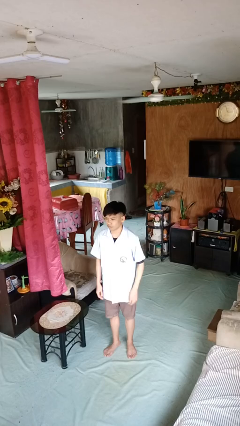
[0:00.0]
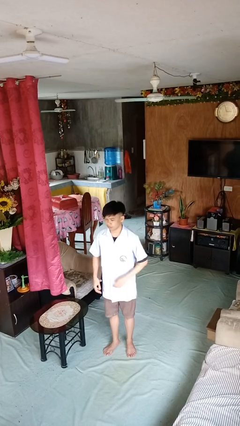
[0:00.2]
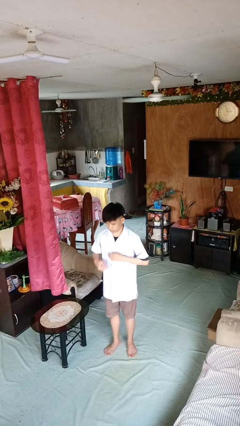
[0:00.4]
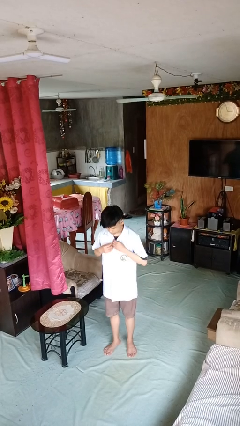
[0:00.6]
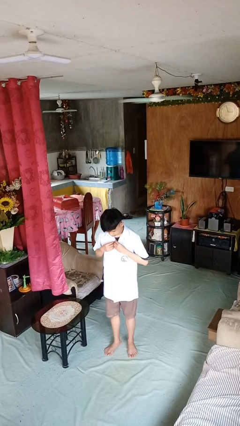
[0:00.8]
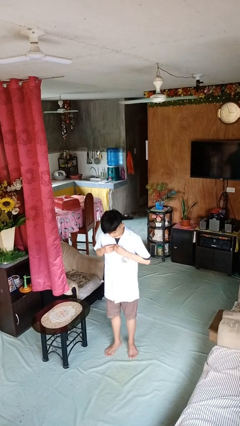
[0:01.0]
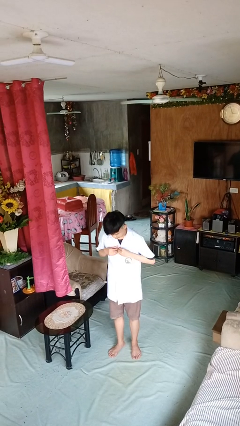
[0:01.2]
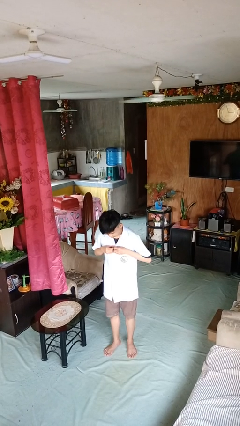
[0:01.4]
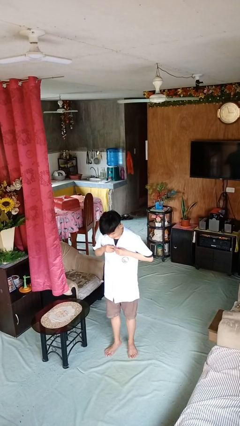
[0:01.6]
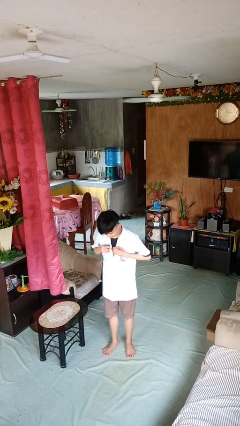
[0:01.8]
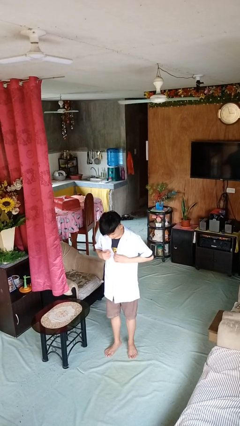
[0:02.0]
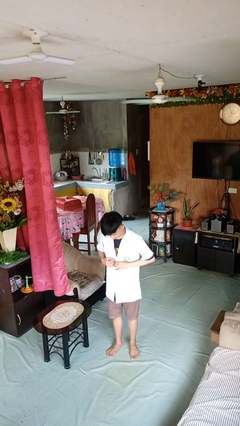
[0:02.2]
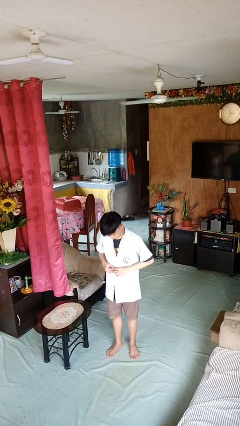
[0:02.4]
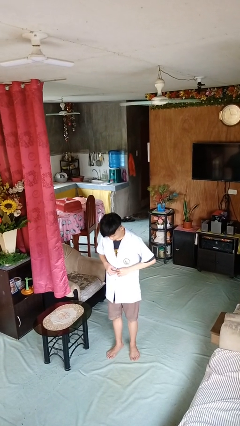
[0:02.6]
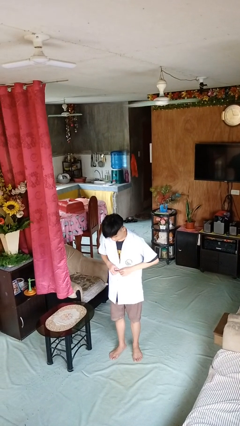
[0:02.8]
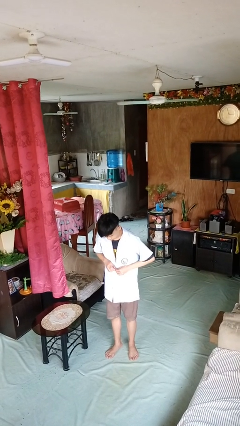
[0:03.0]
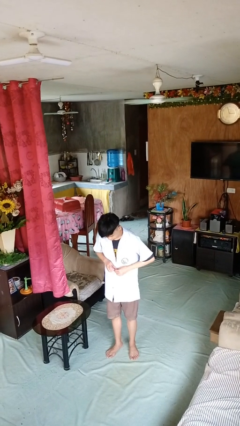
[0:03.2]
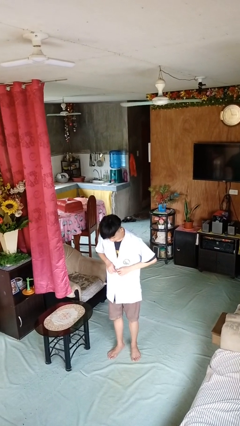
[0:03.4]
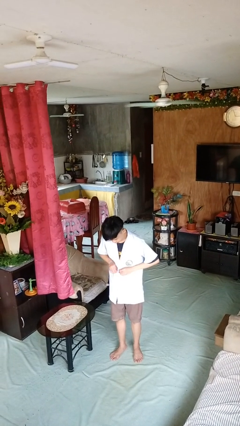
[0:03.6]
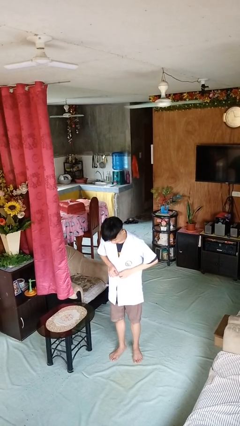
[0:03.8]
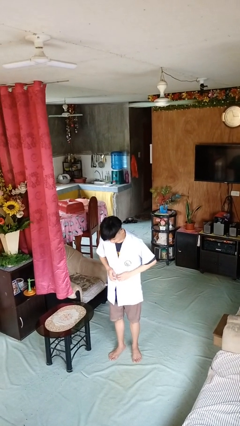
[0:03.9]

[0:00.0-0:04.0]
person unbuttons shirt

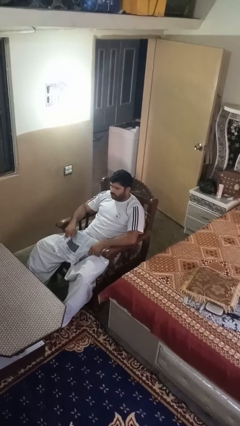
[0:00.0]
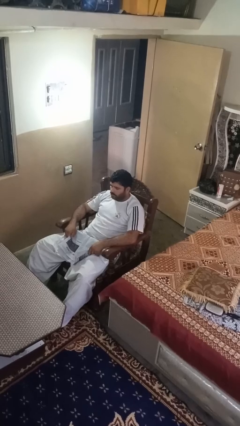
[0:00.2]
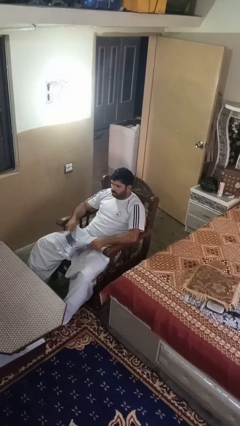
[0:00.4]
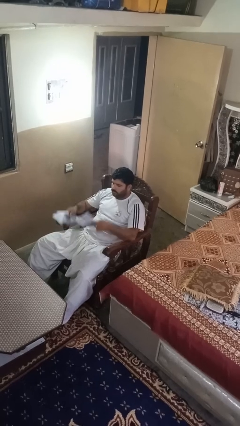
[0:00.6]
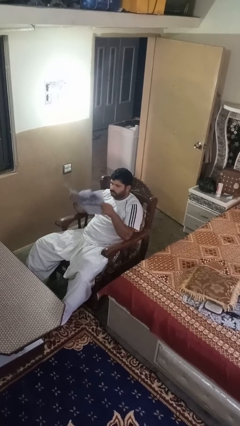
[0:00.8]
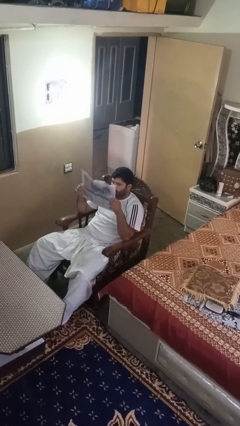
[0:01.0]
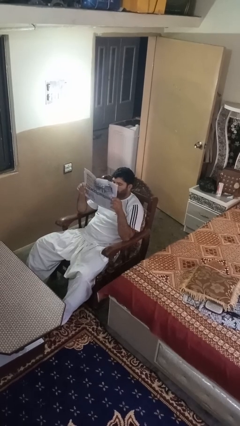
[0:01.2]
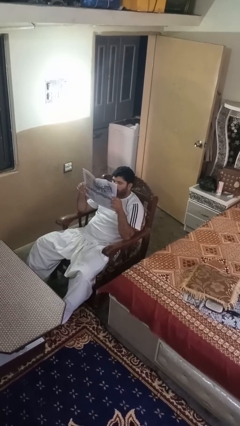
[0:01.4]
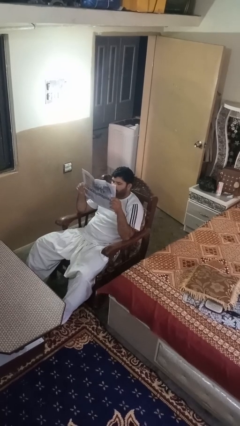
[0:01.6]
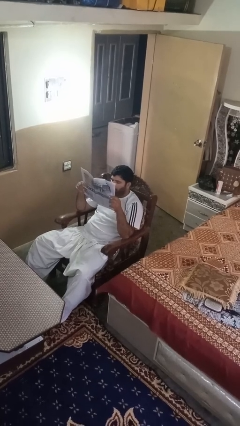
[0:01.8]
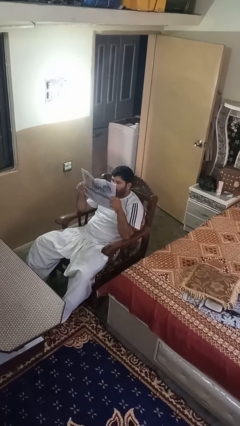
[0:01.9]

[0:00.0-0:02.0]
person reads newspaper

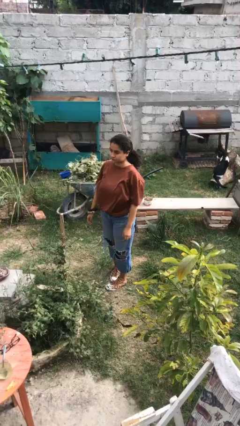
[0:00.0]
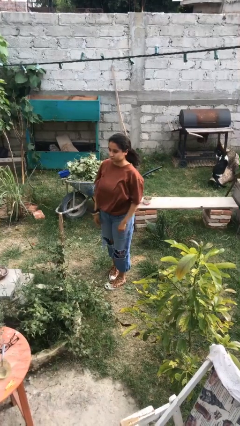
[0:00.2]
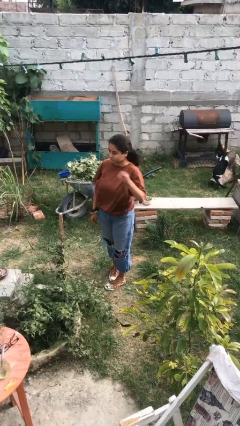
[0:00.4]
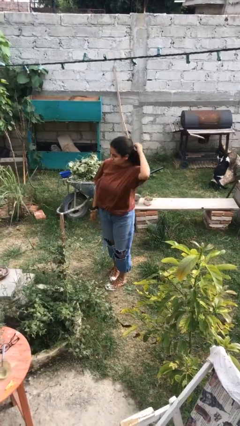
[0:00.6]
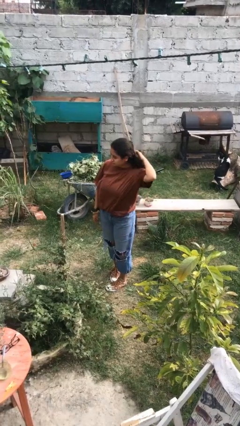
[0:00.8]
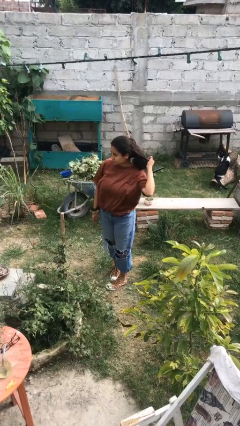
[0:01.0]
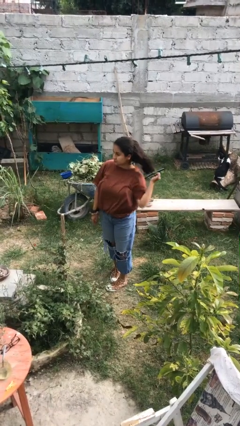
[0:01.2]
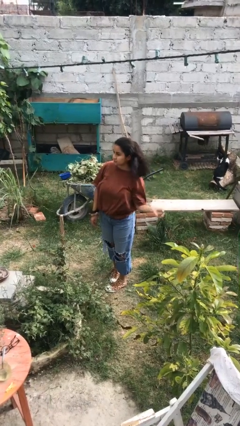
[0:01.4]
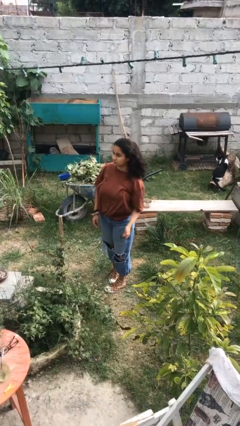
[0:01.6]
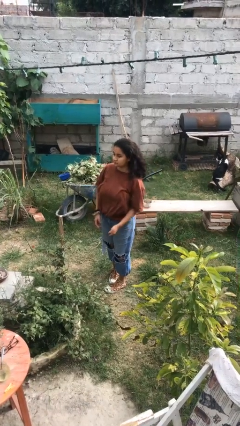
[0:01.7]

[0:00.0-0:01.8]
person takes off hairtie

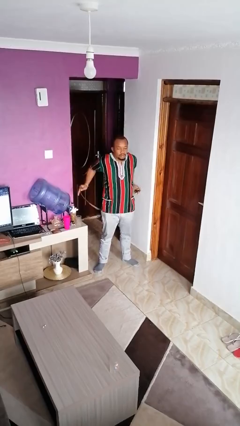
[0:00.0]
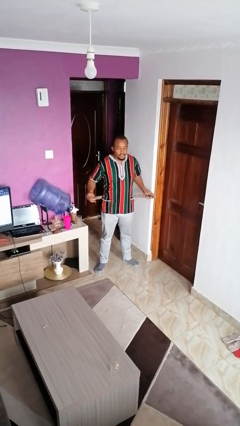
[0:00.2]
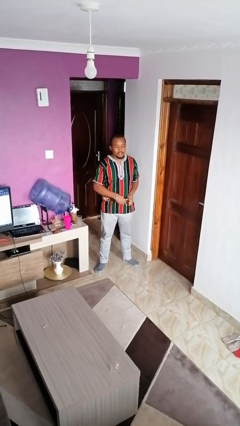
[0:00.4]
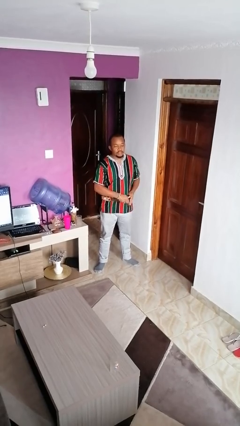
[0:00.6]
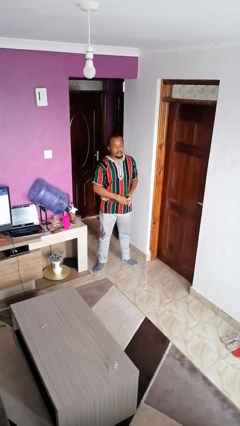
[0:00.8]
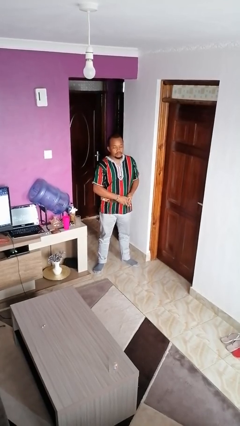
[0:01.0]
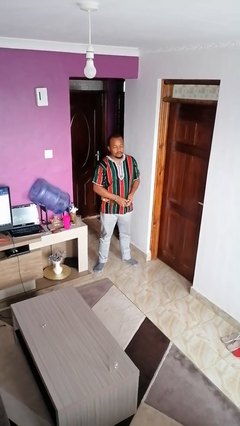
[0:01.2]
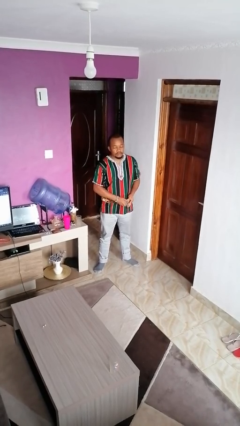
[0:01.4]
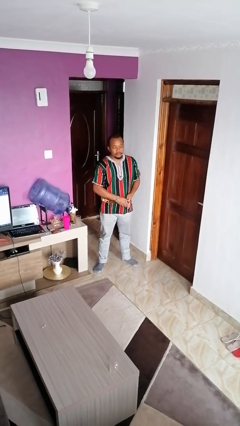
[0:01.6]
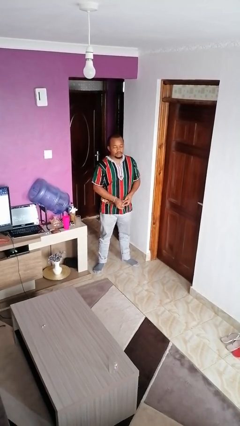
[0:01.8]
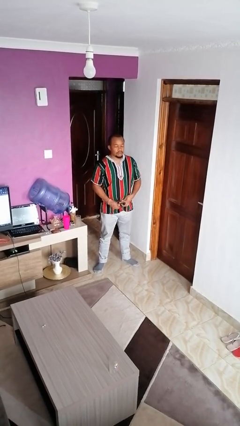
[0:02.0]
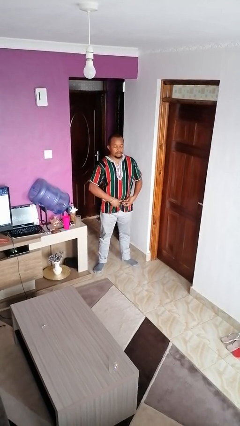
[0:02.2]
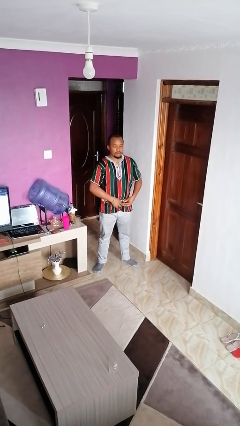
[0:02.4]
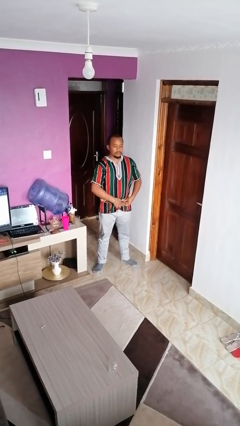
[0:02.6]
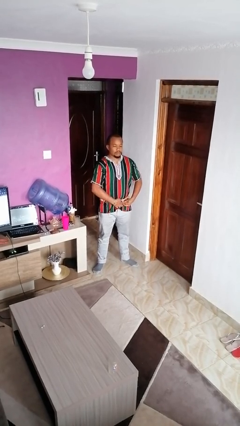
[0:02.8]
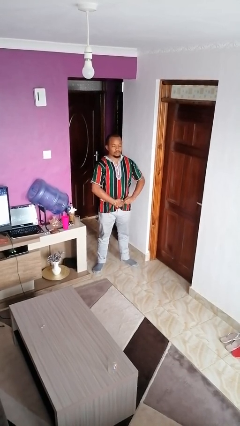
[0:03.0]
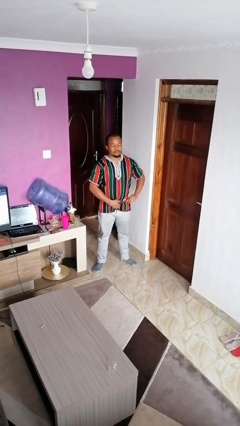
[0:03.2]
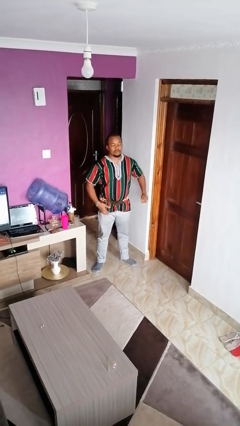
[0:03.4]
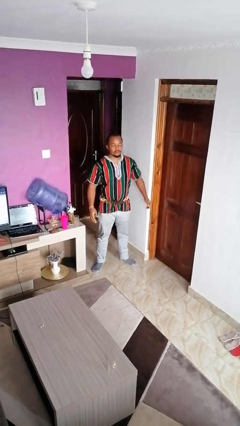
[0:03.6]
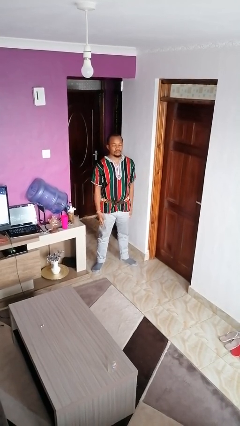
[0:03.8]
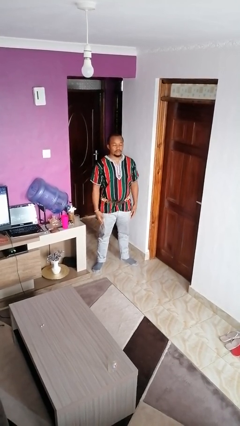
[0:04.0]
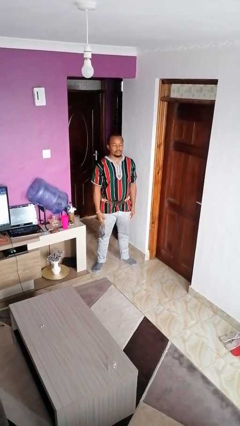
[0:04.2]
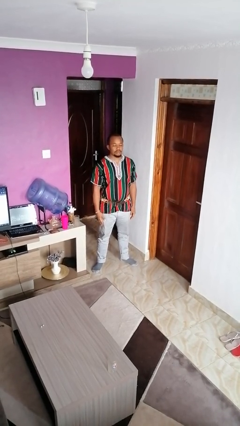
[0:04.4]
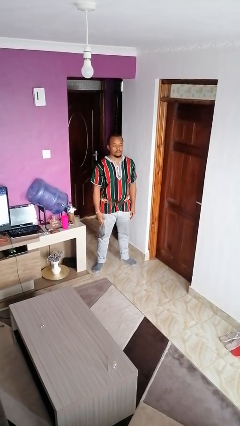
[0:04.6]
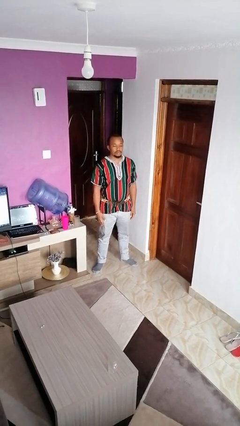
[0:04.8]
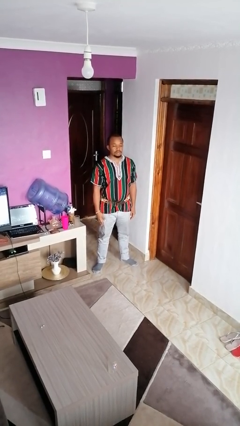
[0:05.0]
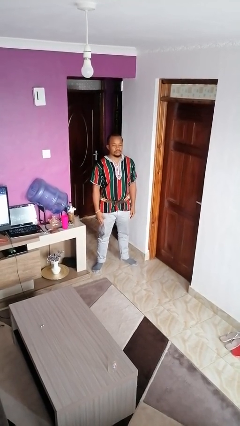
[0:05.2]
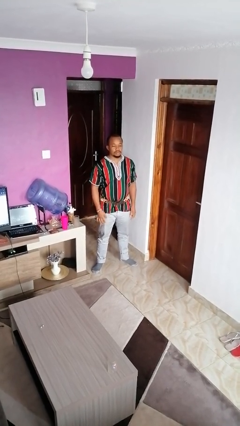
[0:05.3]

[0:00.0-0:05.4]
person puts on belt

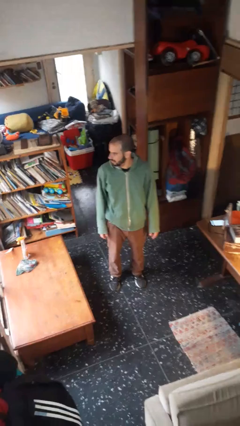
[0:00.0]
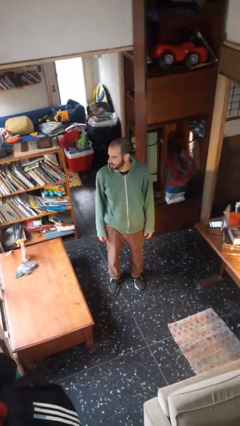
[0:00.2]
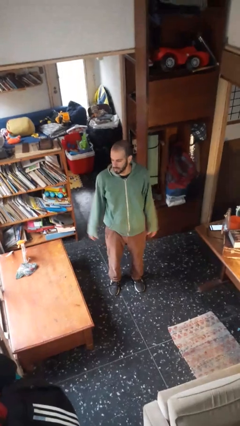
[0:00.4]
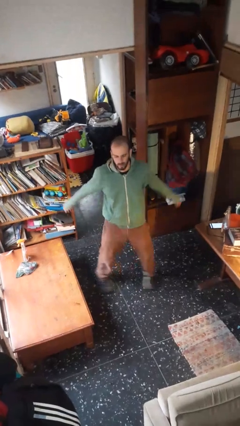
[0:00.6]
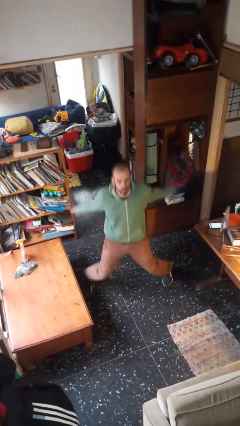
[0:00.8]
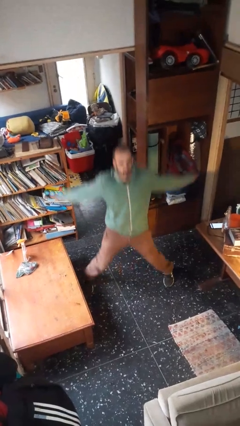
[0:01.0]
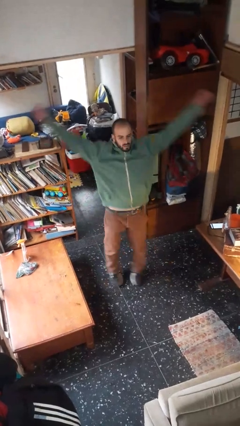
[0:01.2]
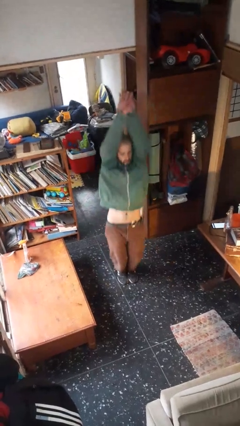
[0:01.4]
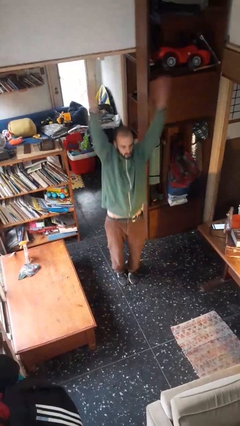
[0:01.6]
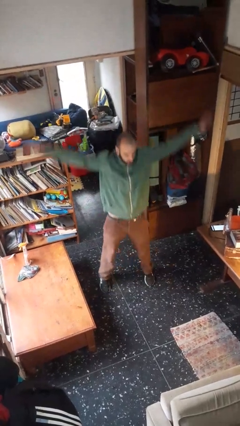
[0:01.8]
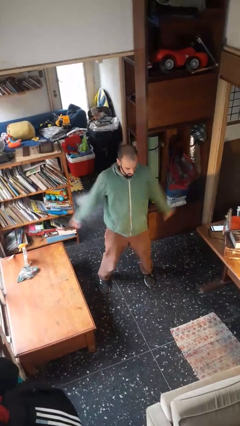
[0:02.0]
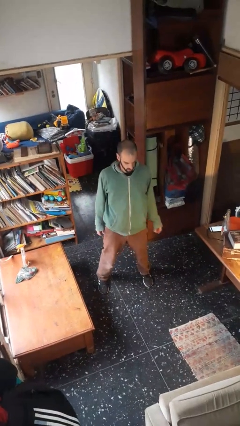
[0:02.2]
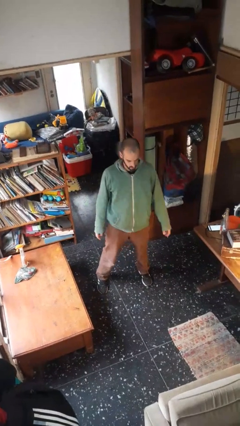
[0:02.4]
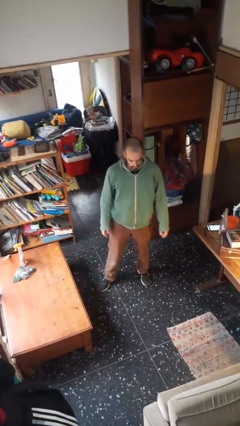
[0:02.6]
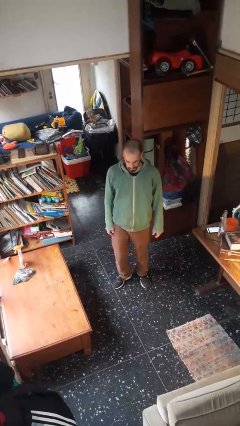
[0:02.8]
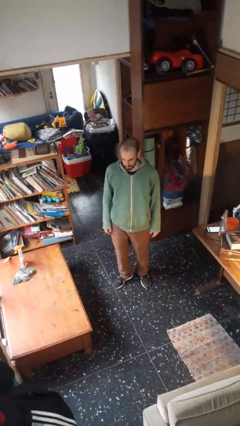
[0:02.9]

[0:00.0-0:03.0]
person exercises with jumping jacks

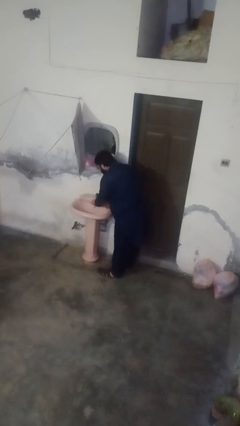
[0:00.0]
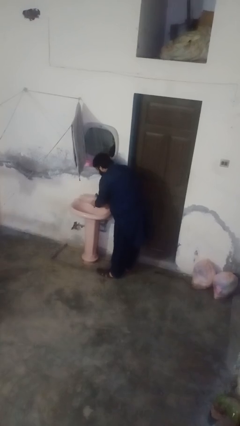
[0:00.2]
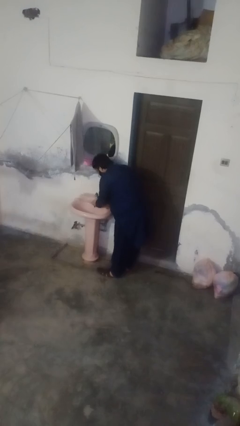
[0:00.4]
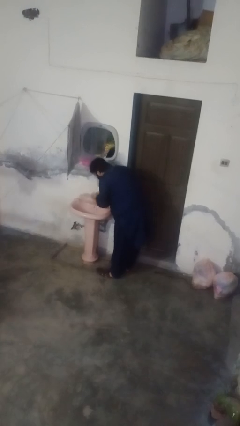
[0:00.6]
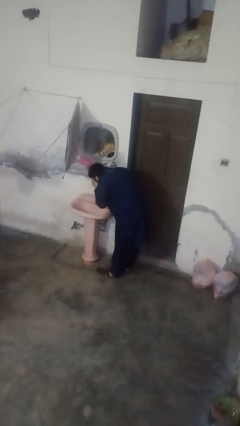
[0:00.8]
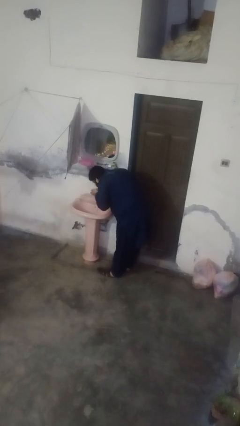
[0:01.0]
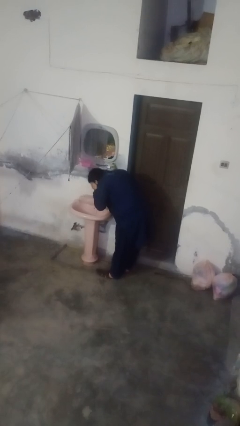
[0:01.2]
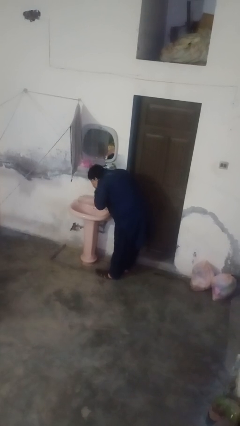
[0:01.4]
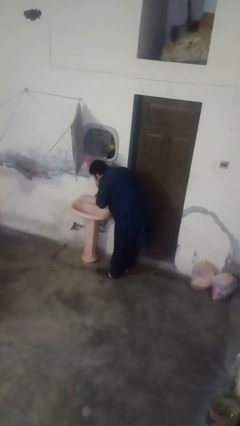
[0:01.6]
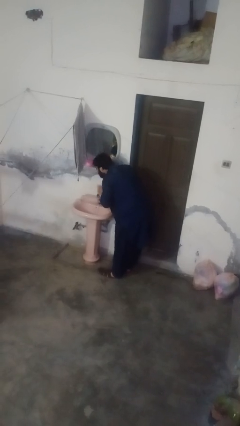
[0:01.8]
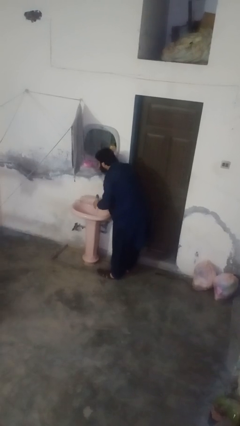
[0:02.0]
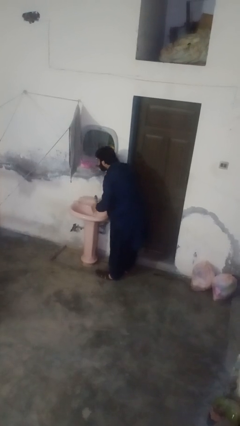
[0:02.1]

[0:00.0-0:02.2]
person washes face
